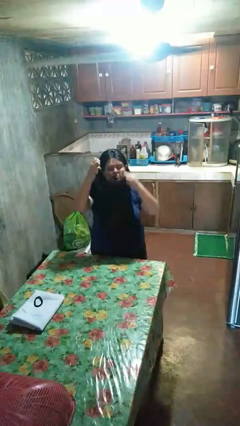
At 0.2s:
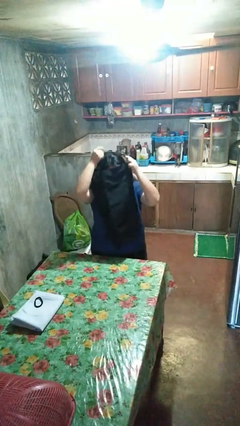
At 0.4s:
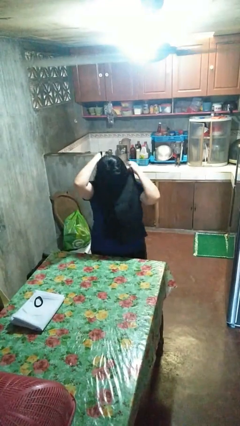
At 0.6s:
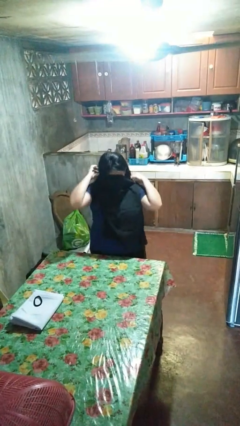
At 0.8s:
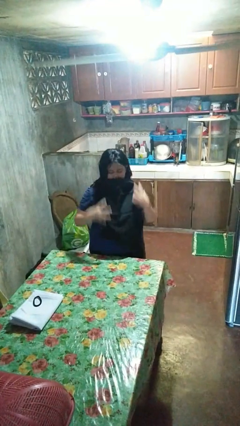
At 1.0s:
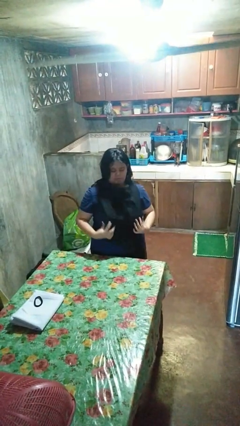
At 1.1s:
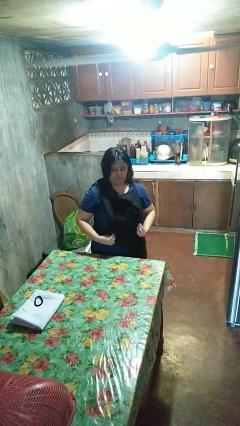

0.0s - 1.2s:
person puts on apron

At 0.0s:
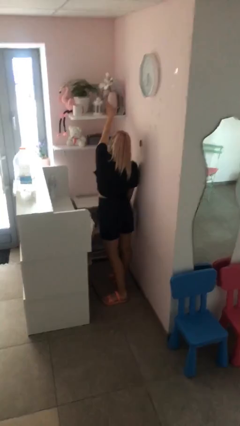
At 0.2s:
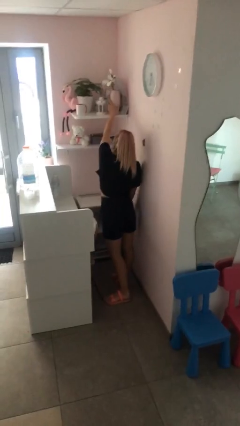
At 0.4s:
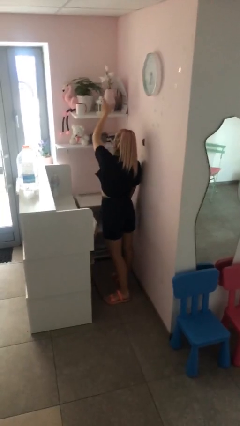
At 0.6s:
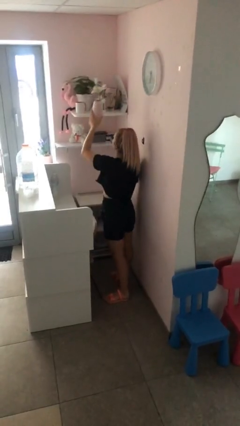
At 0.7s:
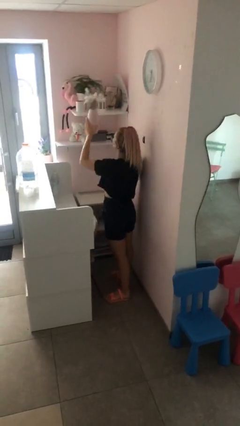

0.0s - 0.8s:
person picks up object from cabinet

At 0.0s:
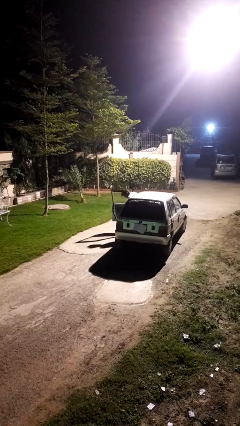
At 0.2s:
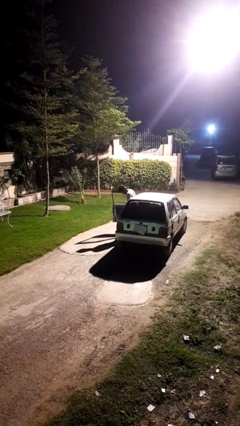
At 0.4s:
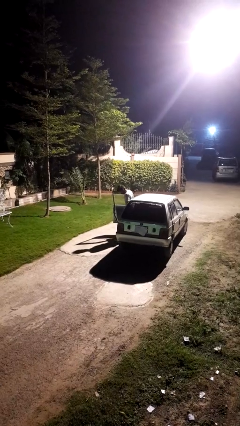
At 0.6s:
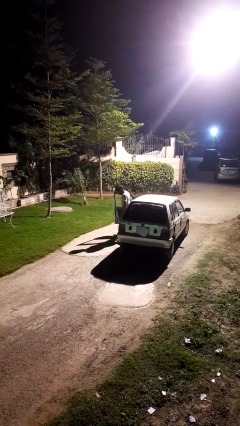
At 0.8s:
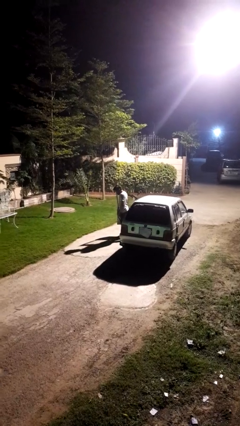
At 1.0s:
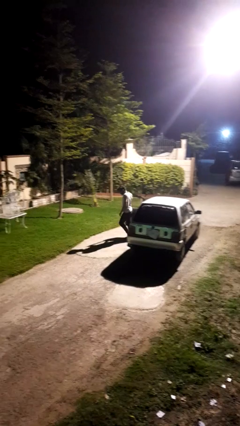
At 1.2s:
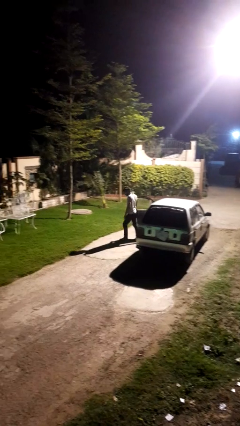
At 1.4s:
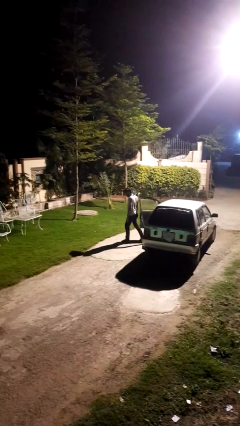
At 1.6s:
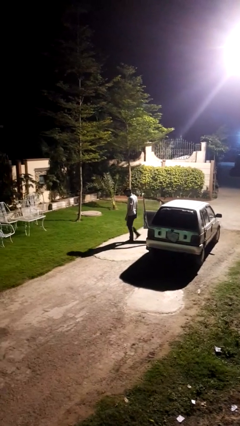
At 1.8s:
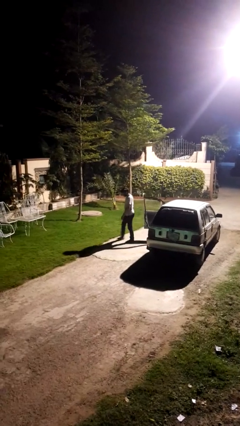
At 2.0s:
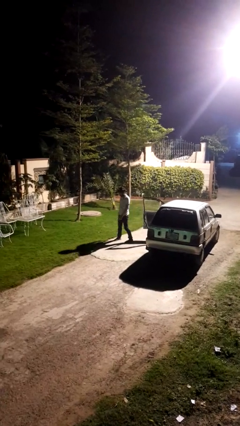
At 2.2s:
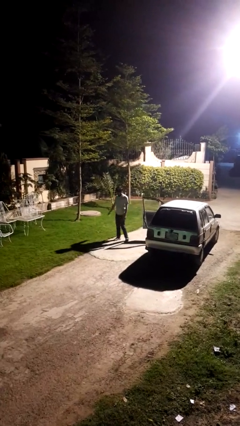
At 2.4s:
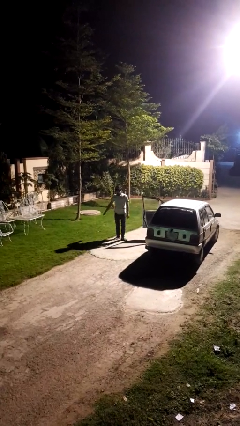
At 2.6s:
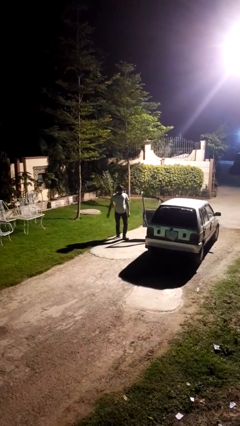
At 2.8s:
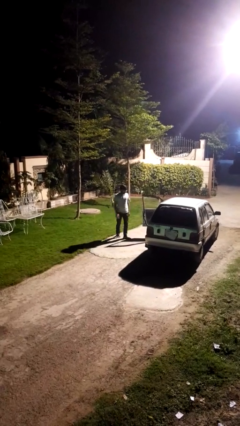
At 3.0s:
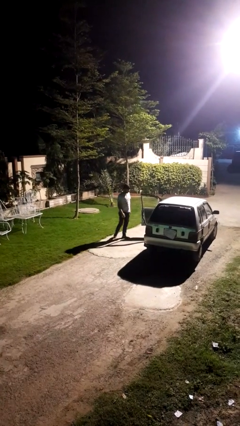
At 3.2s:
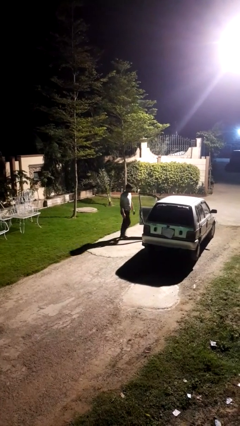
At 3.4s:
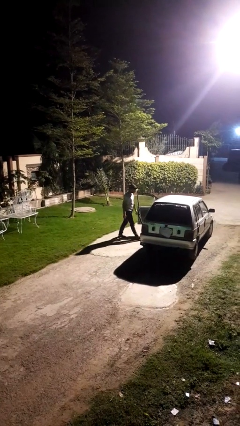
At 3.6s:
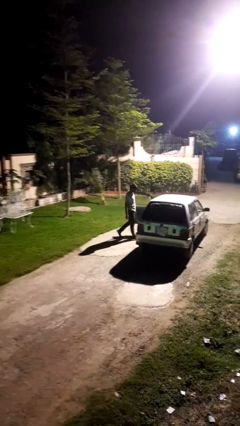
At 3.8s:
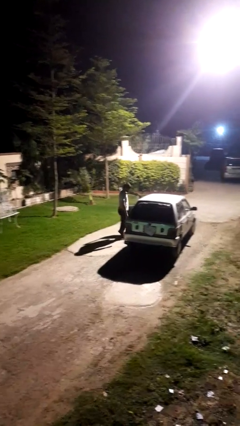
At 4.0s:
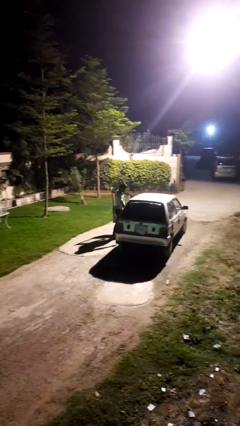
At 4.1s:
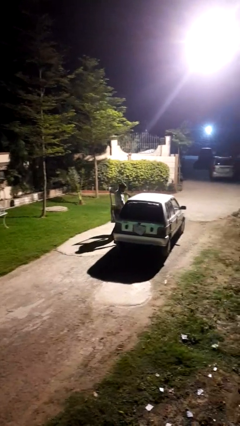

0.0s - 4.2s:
person exits car

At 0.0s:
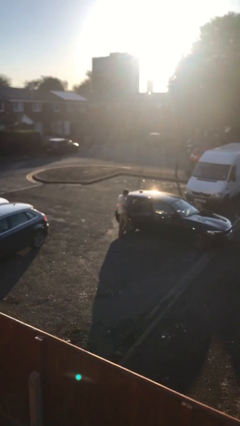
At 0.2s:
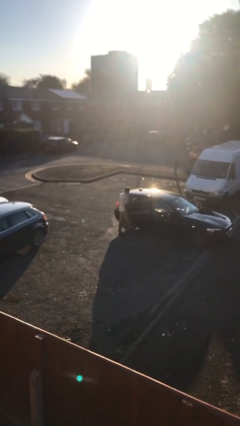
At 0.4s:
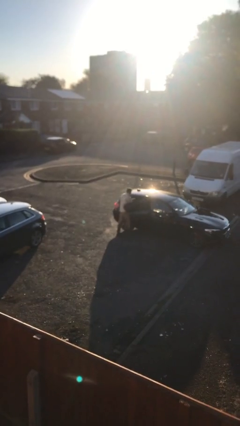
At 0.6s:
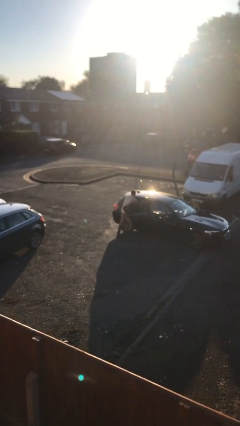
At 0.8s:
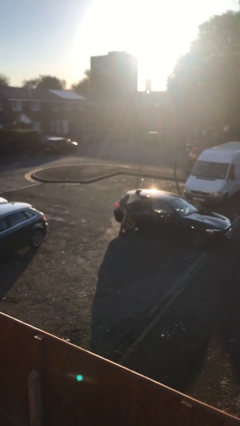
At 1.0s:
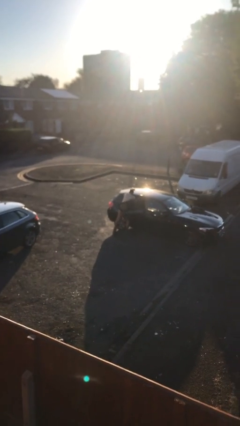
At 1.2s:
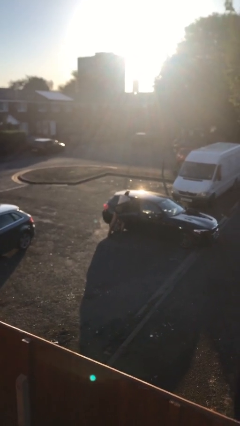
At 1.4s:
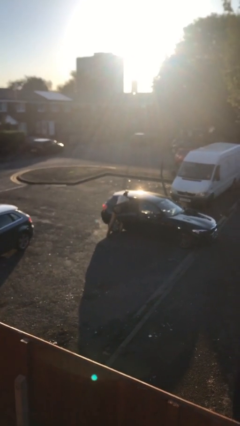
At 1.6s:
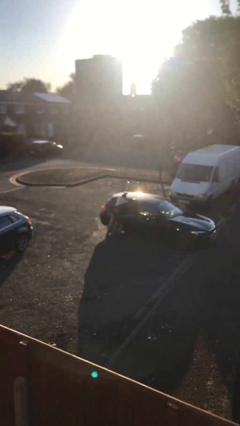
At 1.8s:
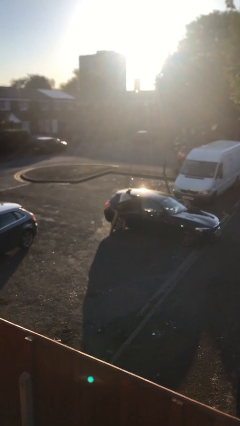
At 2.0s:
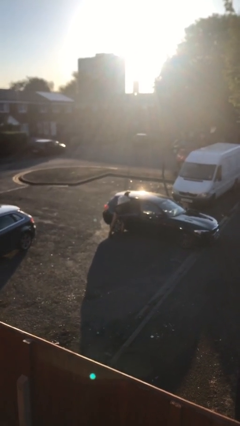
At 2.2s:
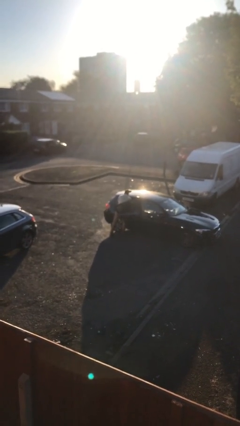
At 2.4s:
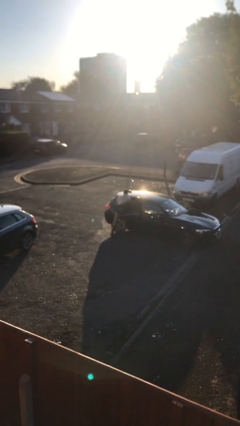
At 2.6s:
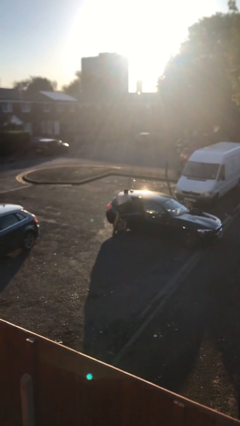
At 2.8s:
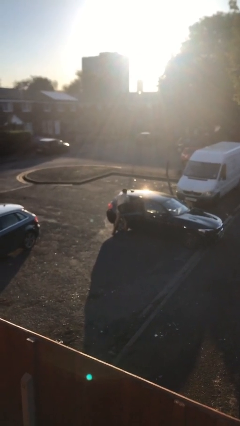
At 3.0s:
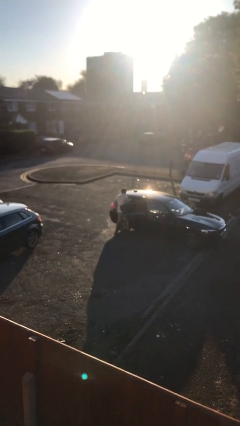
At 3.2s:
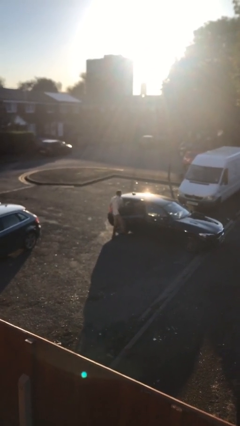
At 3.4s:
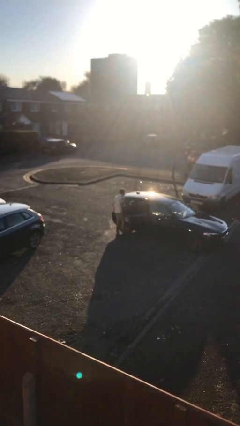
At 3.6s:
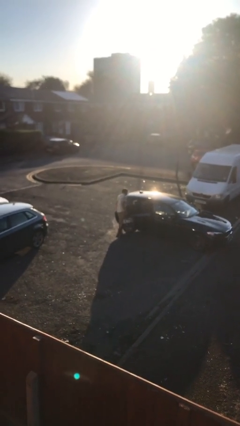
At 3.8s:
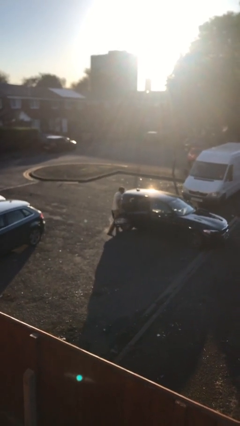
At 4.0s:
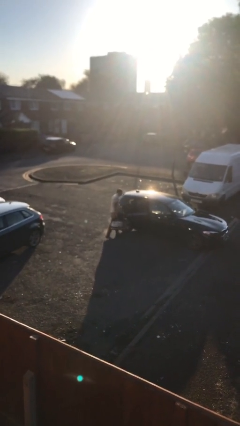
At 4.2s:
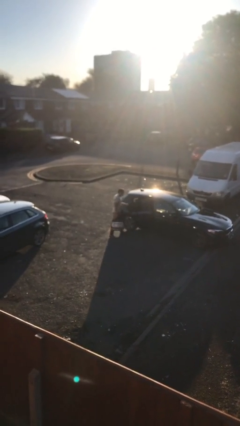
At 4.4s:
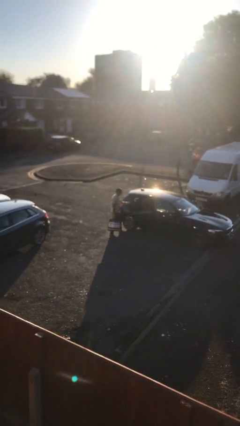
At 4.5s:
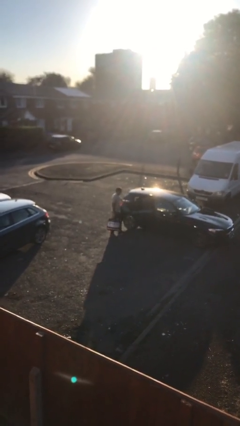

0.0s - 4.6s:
person unloads car

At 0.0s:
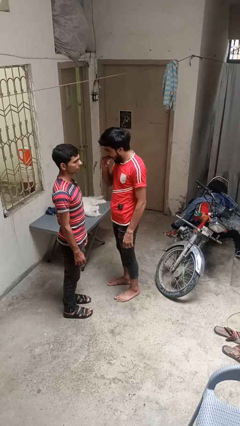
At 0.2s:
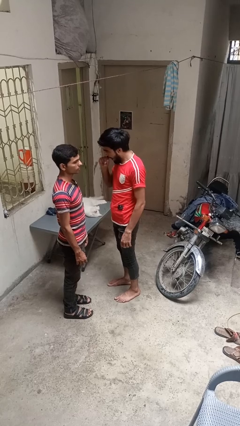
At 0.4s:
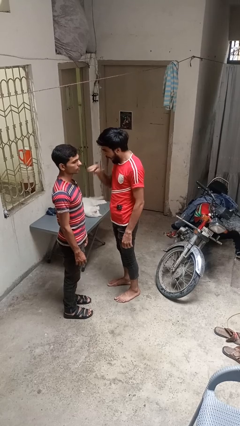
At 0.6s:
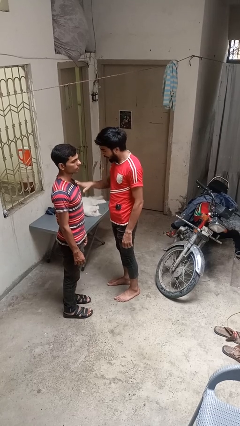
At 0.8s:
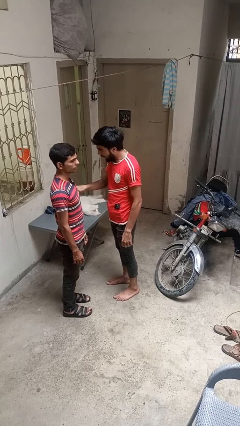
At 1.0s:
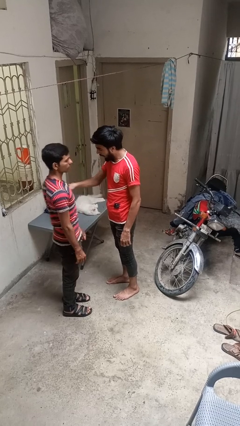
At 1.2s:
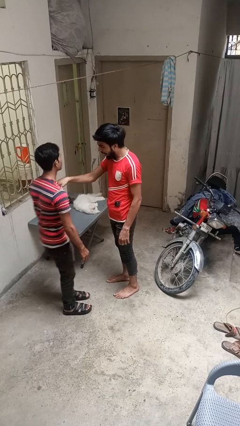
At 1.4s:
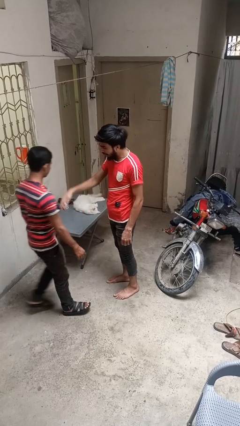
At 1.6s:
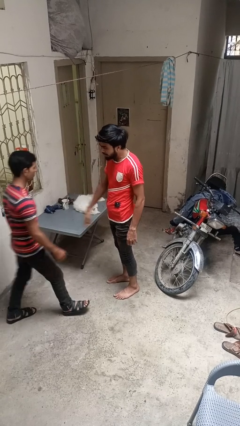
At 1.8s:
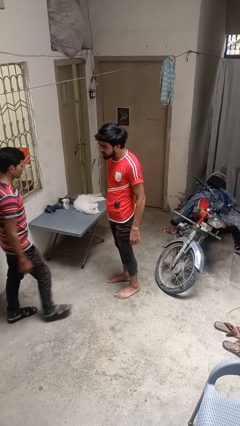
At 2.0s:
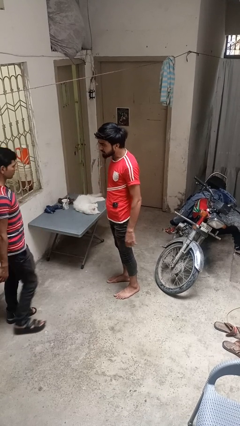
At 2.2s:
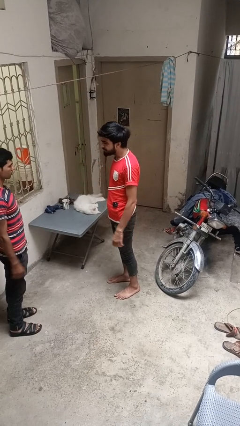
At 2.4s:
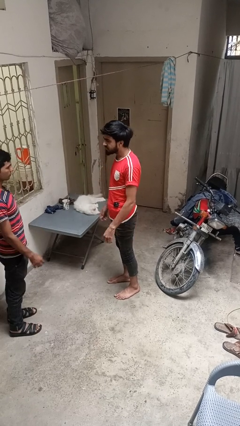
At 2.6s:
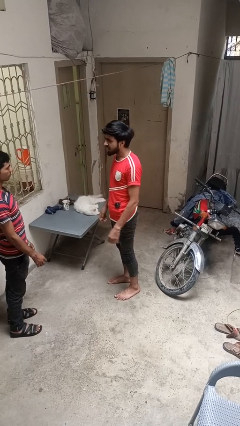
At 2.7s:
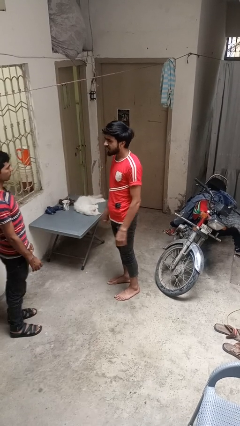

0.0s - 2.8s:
person shoves person

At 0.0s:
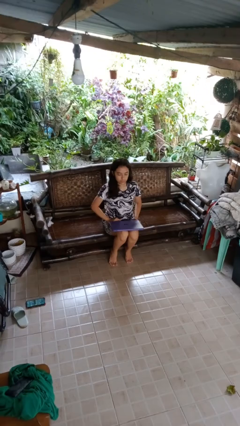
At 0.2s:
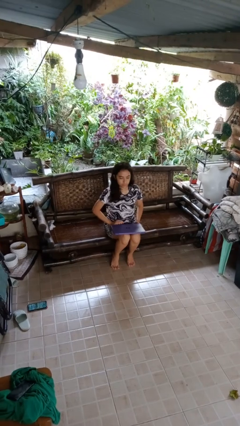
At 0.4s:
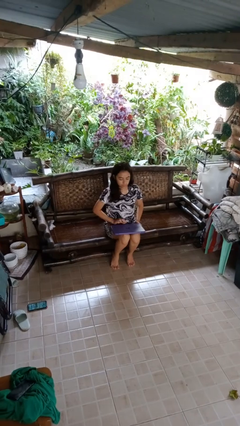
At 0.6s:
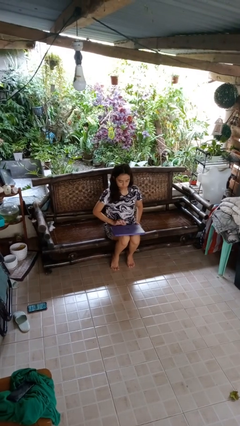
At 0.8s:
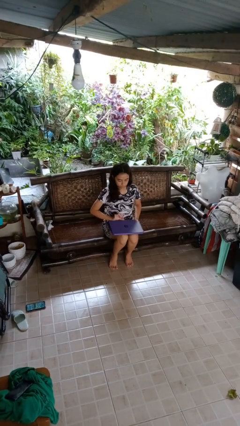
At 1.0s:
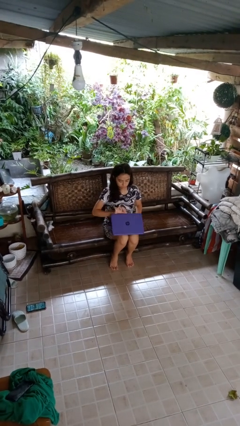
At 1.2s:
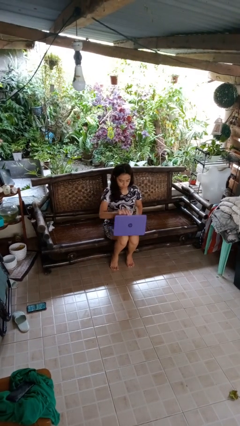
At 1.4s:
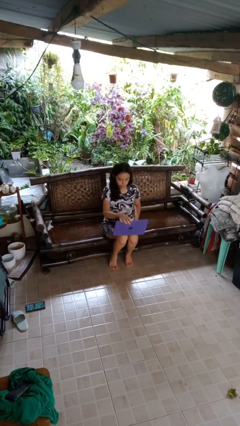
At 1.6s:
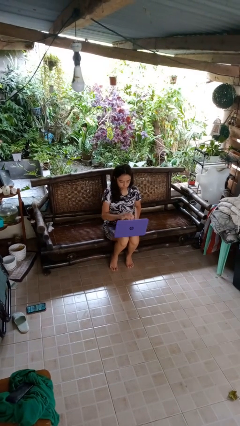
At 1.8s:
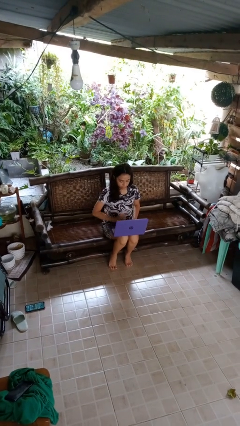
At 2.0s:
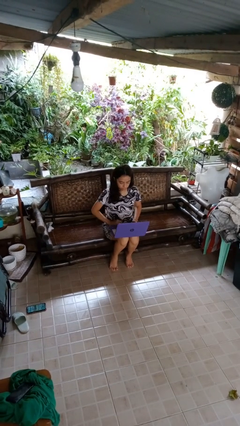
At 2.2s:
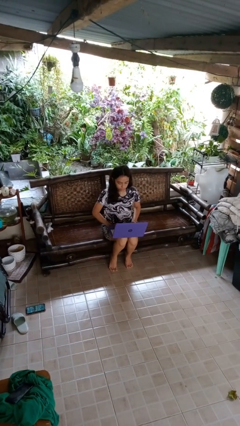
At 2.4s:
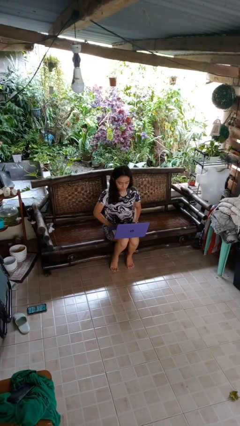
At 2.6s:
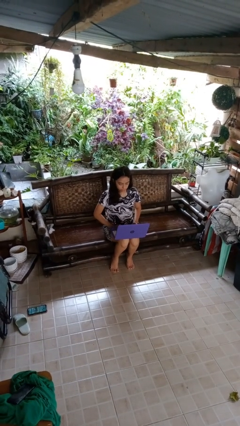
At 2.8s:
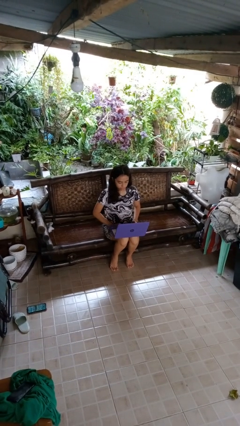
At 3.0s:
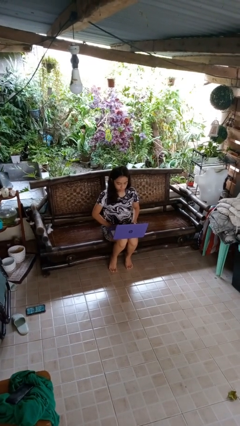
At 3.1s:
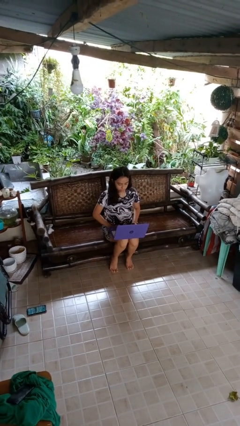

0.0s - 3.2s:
person opens laptop

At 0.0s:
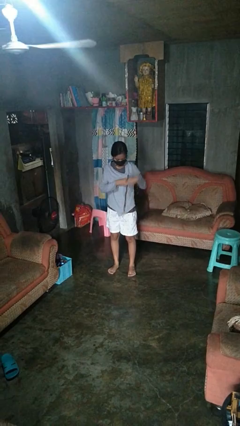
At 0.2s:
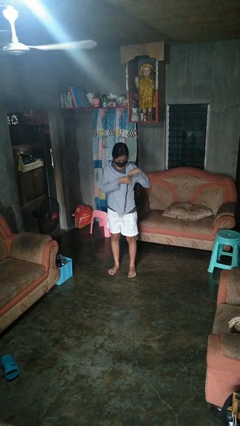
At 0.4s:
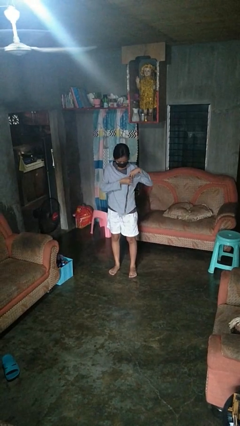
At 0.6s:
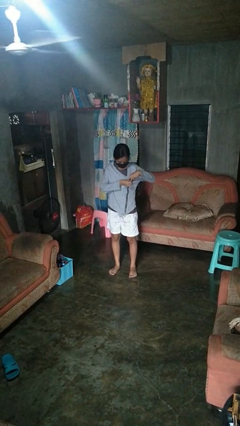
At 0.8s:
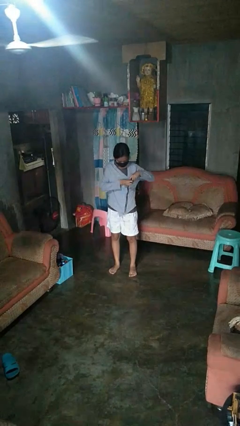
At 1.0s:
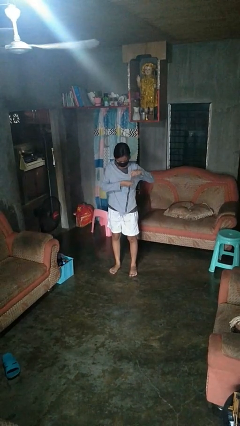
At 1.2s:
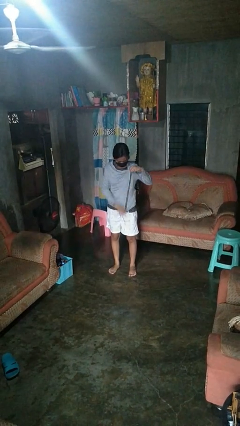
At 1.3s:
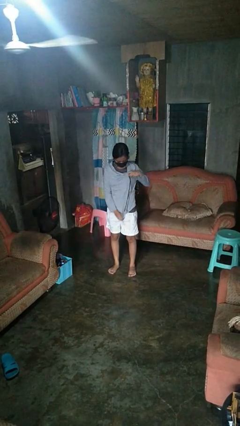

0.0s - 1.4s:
person unzips jacket
